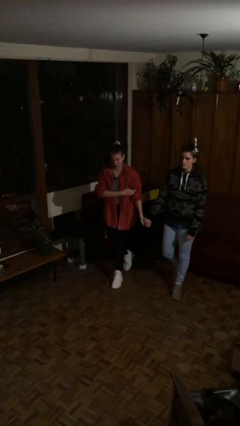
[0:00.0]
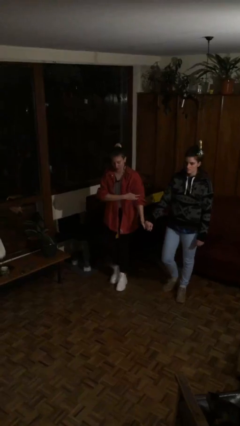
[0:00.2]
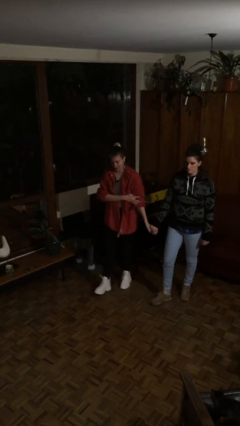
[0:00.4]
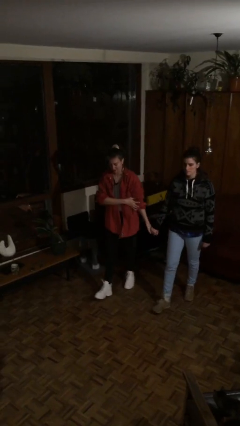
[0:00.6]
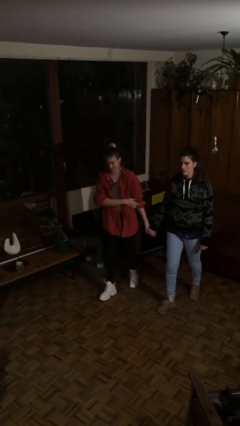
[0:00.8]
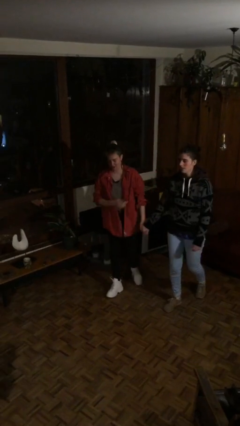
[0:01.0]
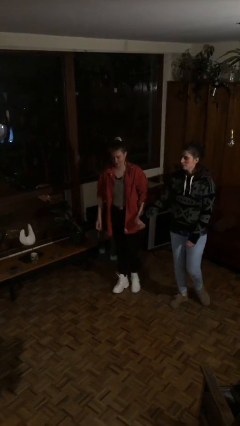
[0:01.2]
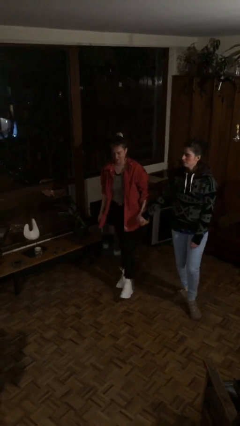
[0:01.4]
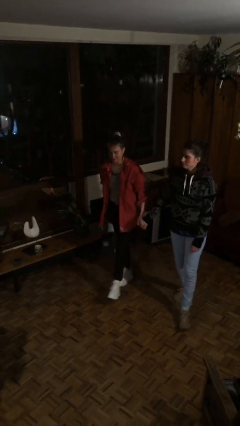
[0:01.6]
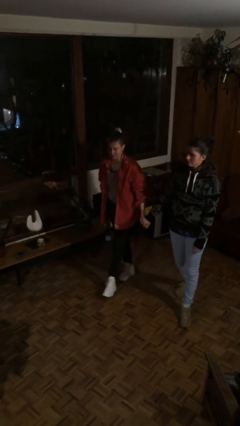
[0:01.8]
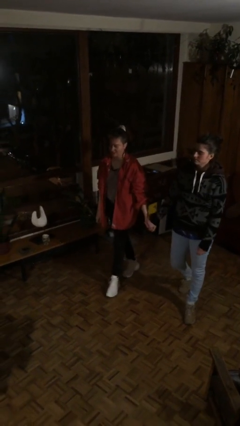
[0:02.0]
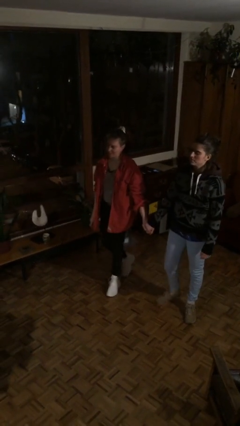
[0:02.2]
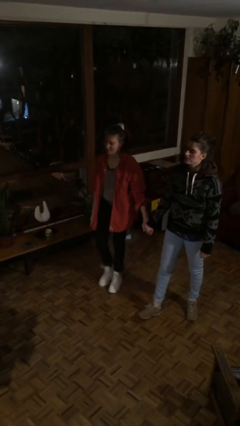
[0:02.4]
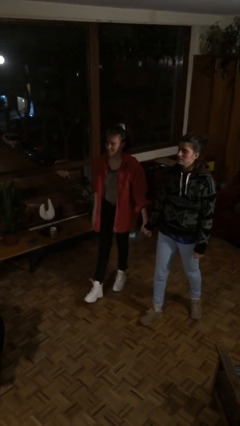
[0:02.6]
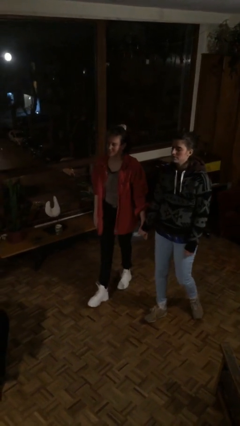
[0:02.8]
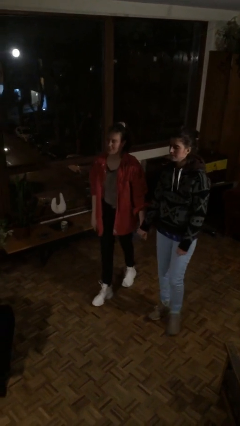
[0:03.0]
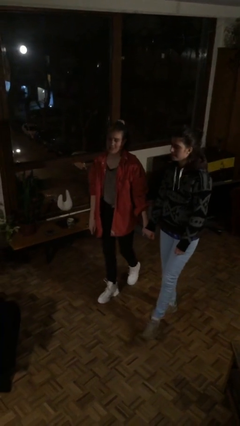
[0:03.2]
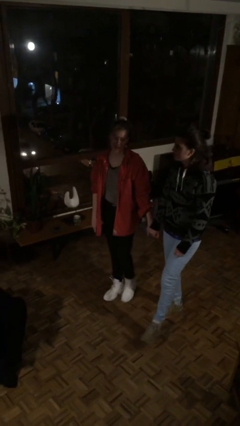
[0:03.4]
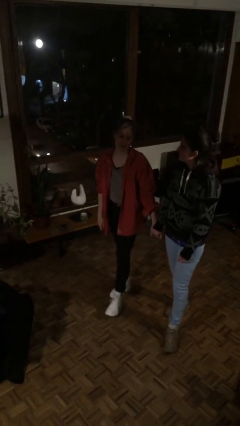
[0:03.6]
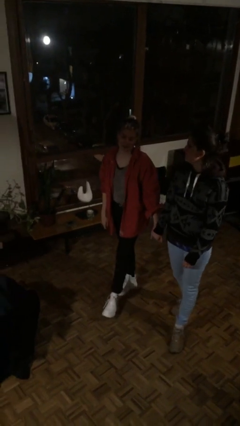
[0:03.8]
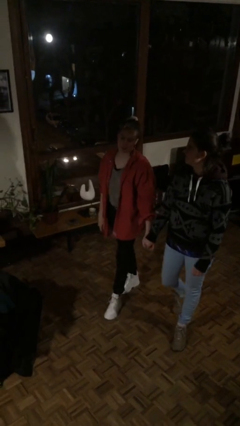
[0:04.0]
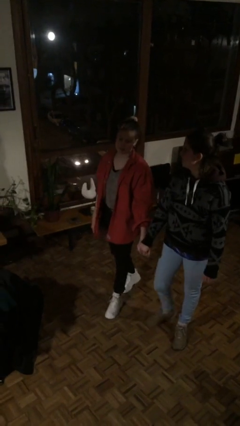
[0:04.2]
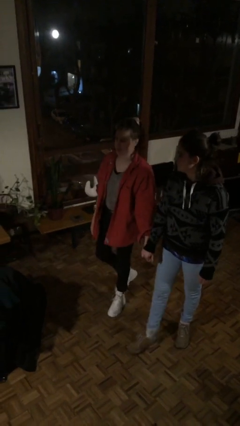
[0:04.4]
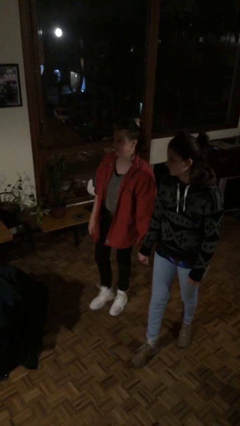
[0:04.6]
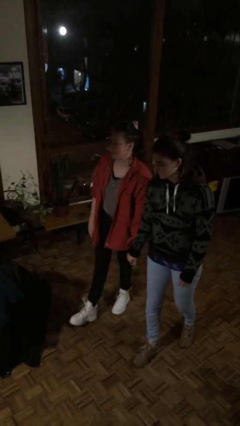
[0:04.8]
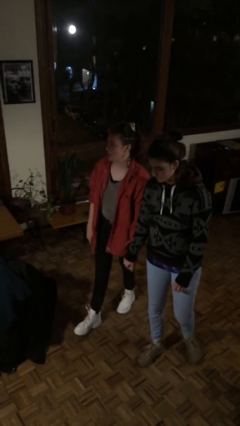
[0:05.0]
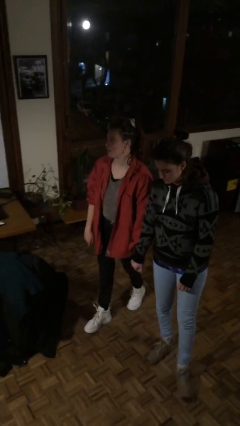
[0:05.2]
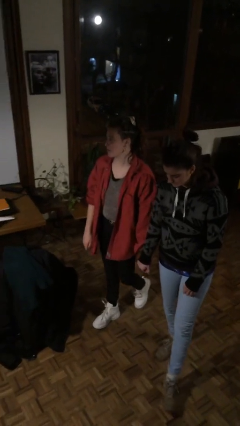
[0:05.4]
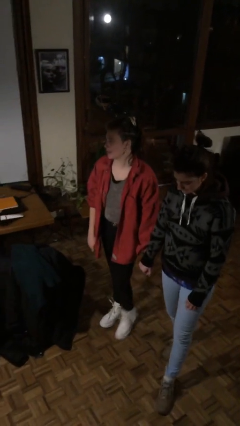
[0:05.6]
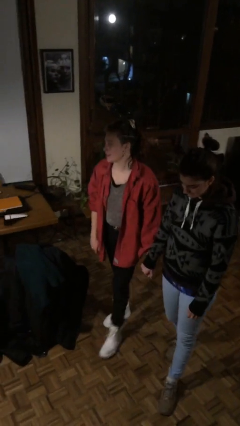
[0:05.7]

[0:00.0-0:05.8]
person holds hand

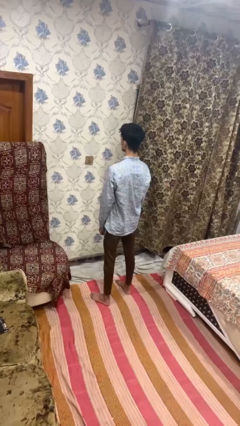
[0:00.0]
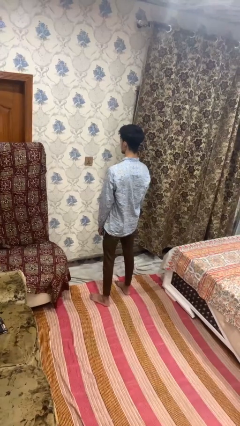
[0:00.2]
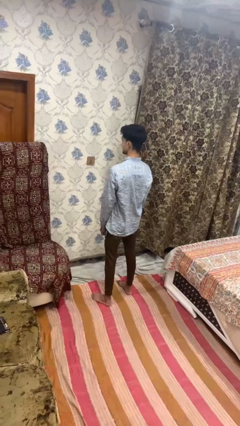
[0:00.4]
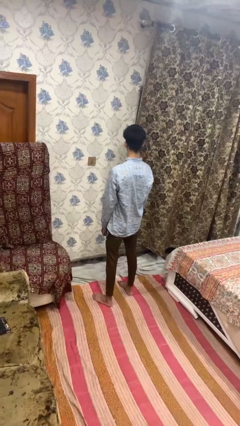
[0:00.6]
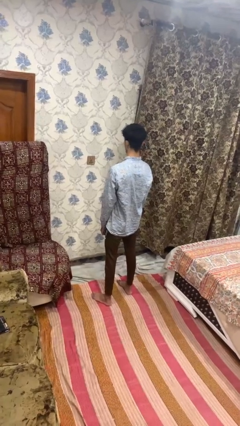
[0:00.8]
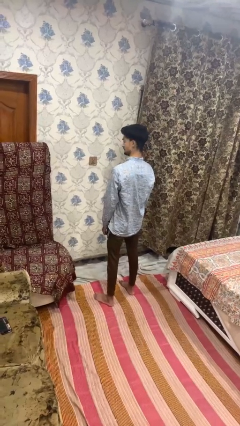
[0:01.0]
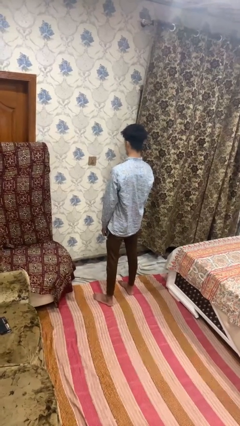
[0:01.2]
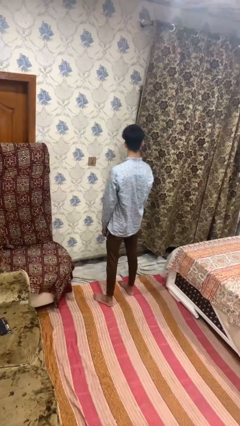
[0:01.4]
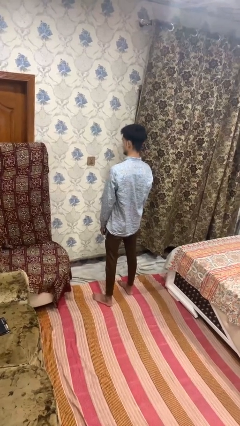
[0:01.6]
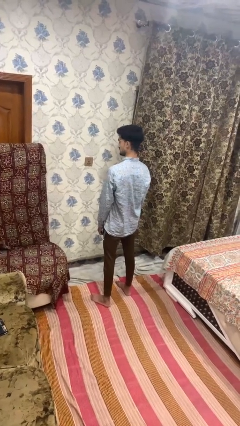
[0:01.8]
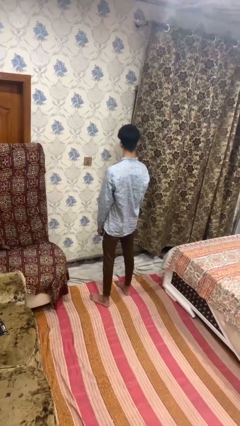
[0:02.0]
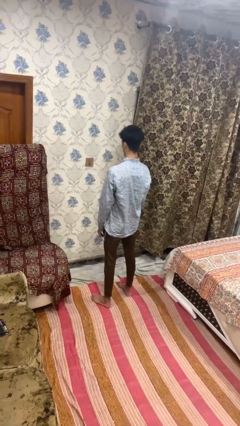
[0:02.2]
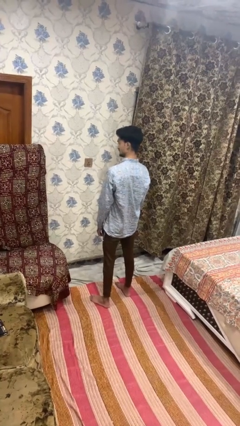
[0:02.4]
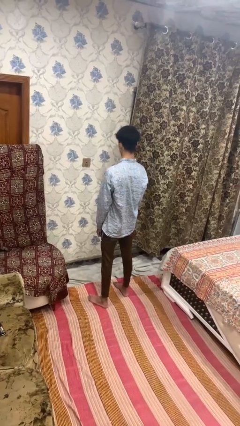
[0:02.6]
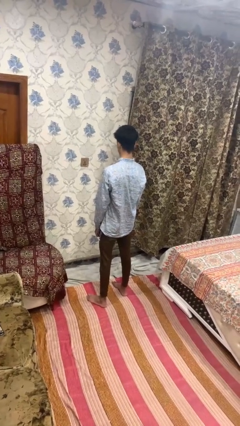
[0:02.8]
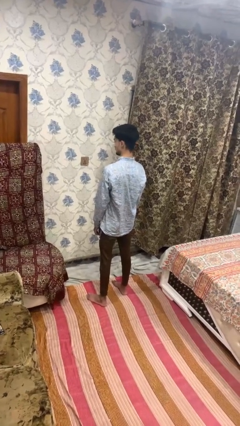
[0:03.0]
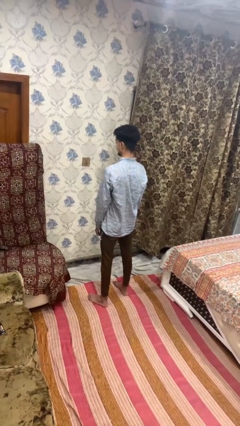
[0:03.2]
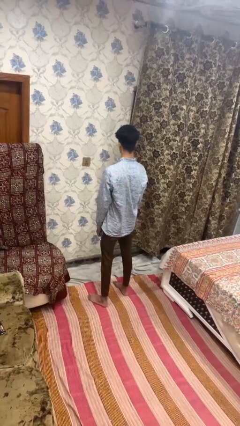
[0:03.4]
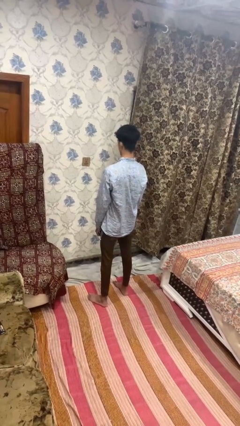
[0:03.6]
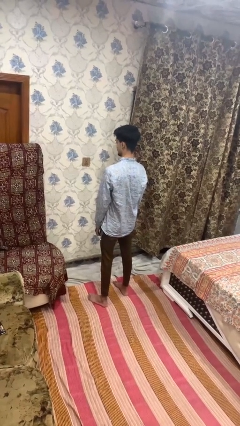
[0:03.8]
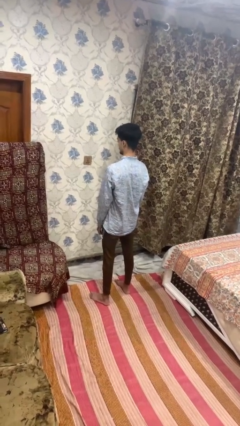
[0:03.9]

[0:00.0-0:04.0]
person shakes head

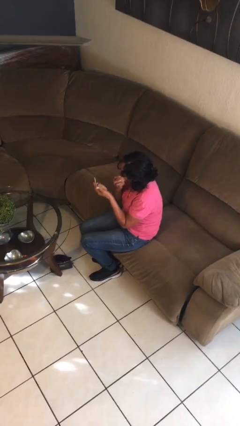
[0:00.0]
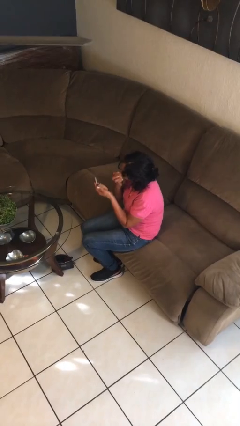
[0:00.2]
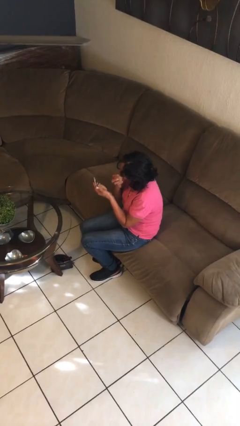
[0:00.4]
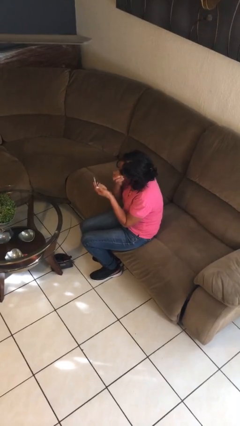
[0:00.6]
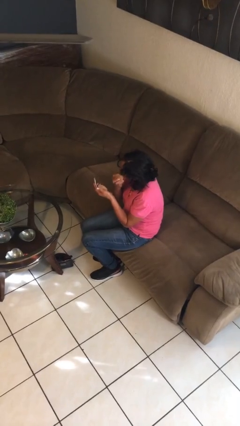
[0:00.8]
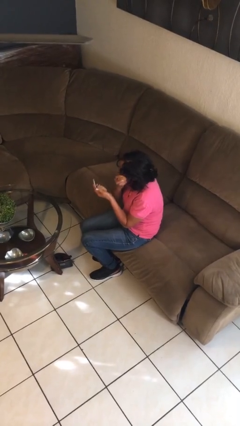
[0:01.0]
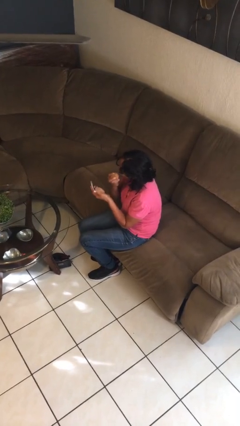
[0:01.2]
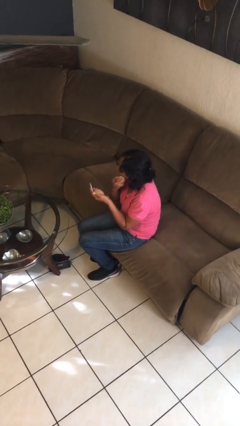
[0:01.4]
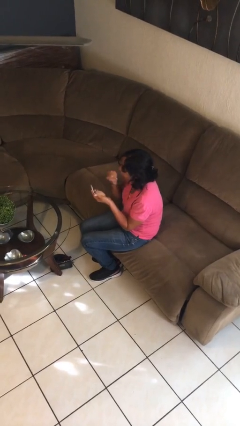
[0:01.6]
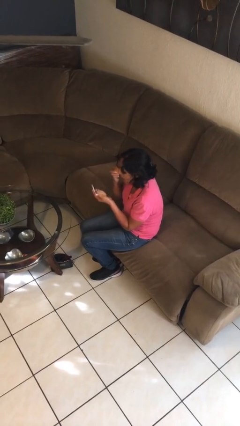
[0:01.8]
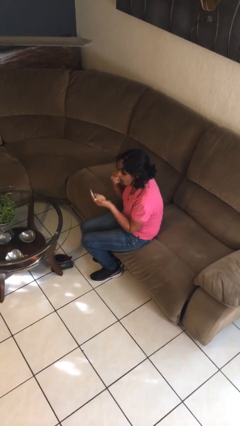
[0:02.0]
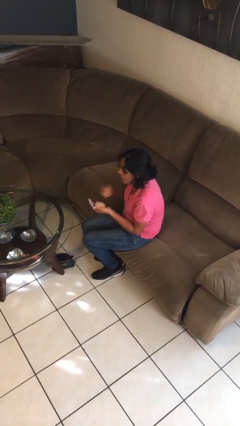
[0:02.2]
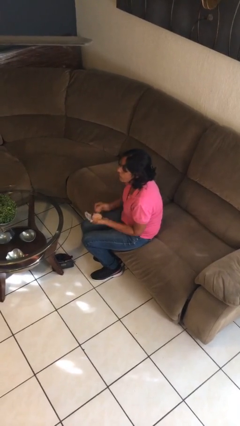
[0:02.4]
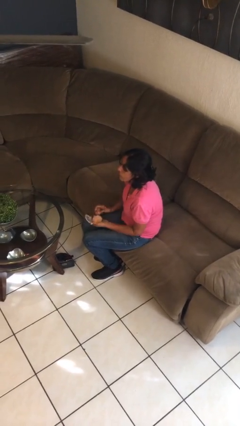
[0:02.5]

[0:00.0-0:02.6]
person applies foundation makeup

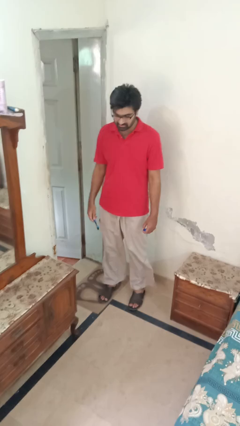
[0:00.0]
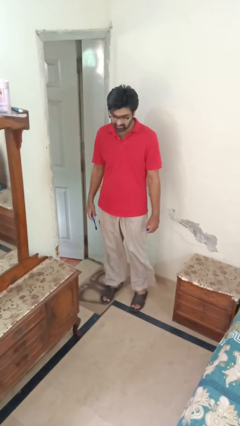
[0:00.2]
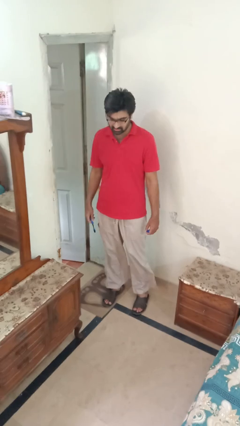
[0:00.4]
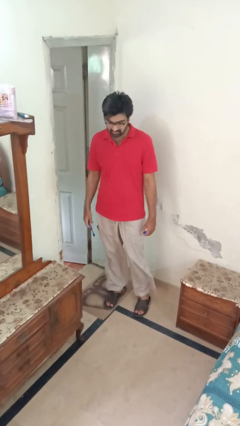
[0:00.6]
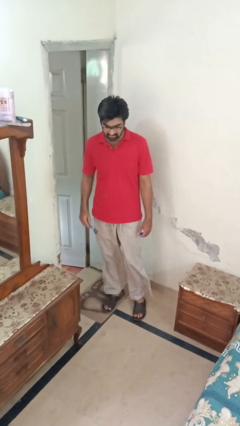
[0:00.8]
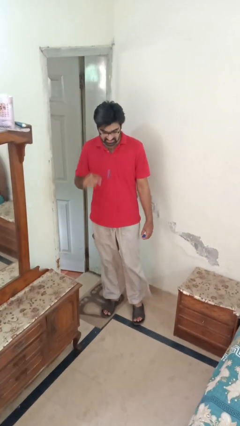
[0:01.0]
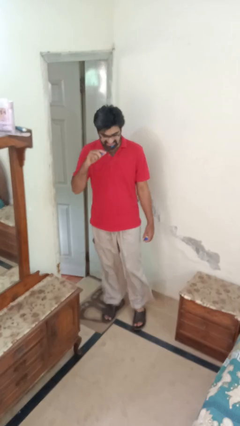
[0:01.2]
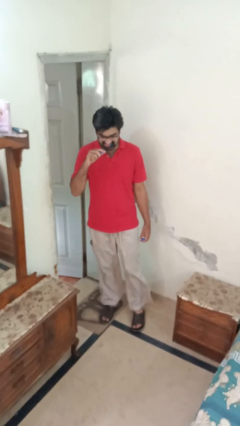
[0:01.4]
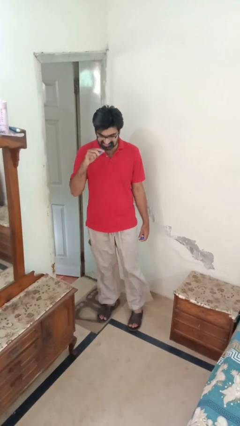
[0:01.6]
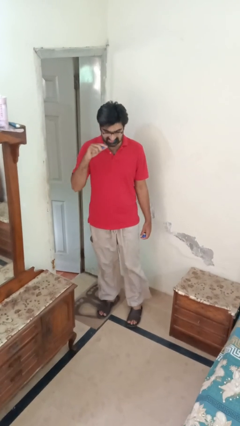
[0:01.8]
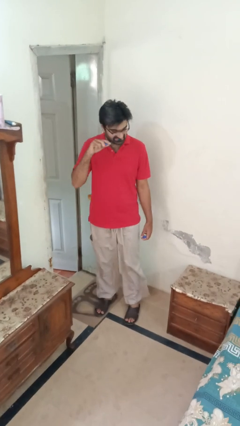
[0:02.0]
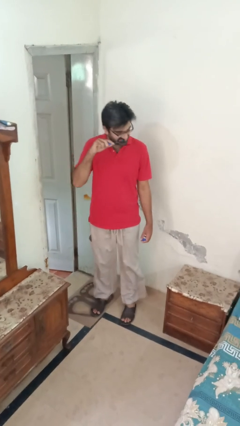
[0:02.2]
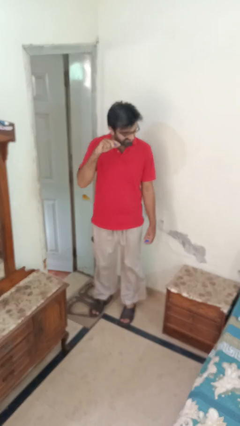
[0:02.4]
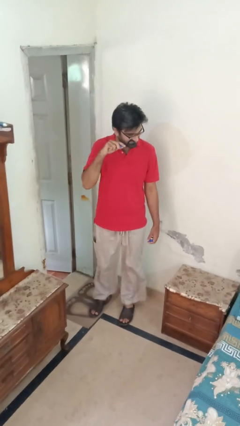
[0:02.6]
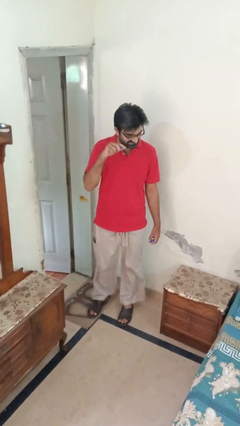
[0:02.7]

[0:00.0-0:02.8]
person brushes teeth

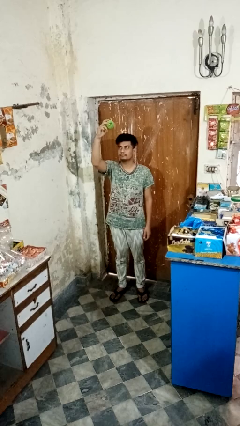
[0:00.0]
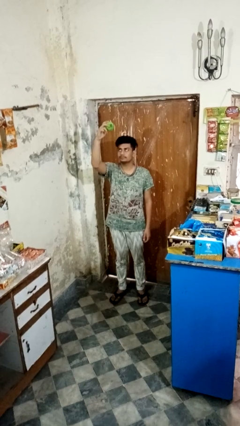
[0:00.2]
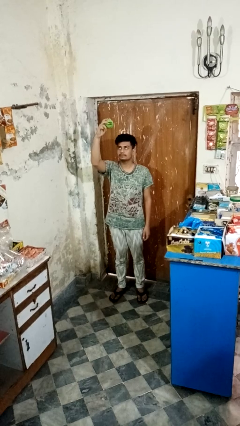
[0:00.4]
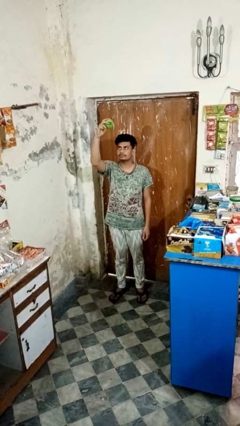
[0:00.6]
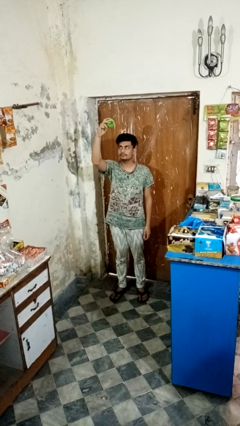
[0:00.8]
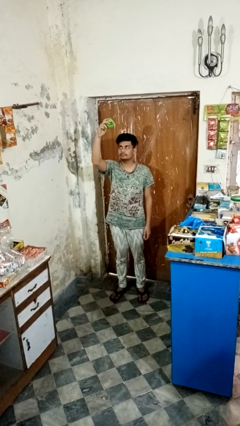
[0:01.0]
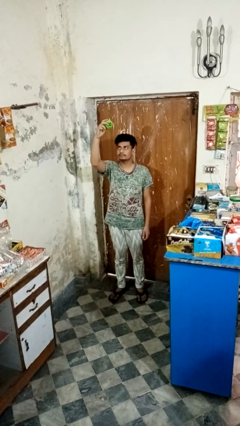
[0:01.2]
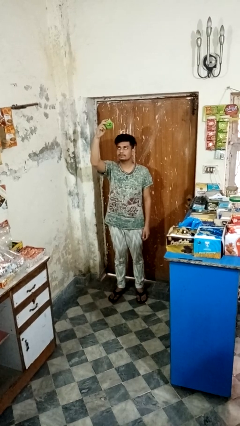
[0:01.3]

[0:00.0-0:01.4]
person drops object

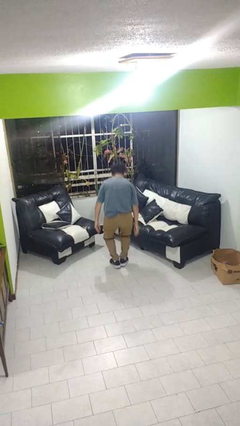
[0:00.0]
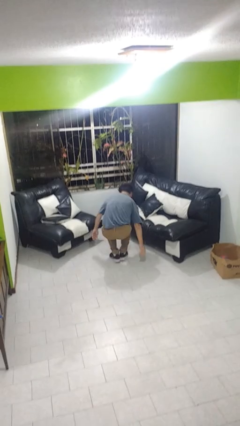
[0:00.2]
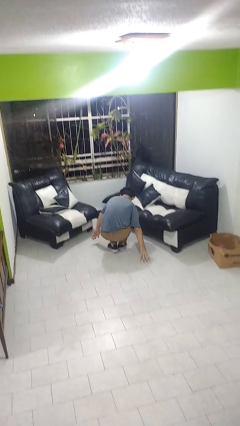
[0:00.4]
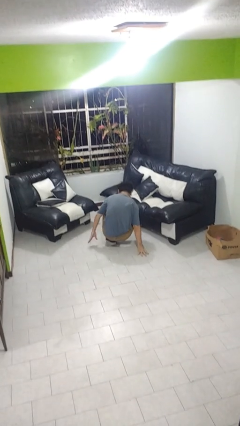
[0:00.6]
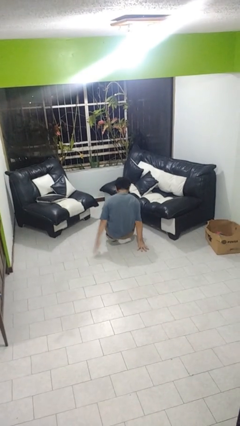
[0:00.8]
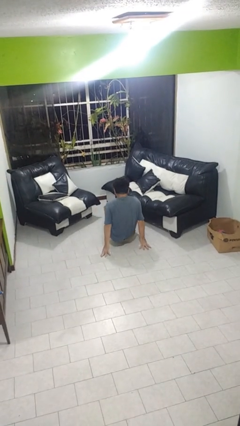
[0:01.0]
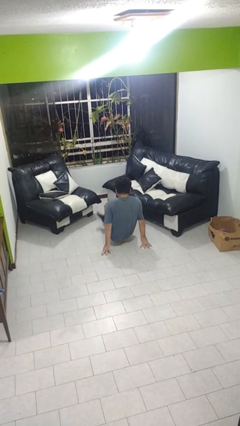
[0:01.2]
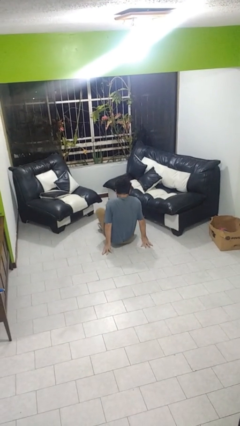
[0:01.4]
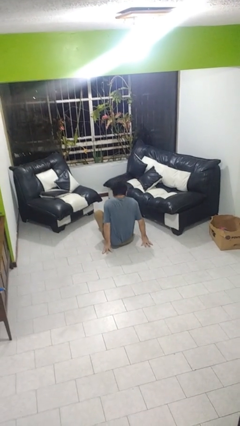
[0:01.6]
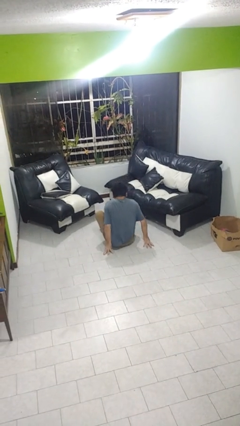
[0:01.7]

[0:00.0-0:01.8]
person sits crisscross
